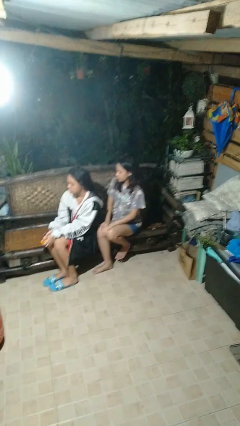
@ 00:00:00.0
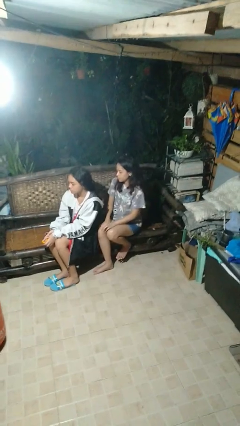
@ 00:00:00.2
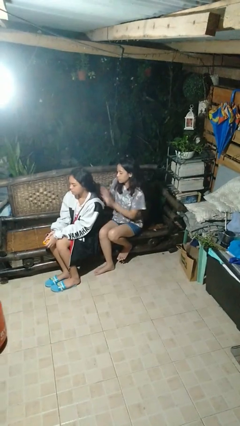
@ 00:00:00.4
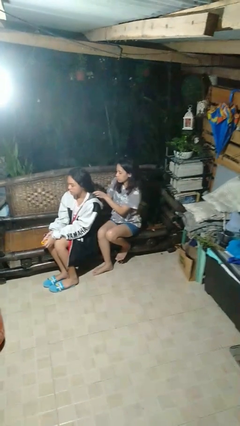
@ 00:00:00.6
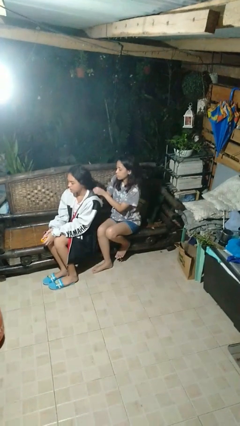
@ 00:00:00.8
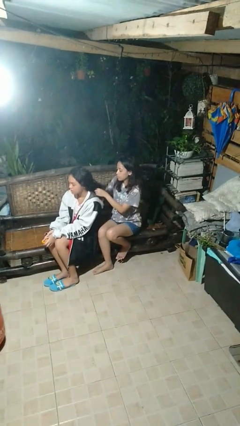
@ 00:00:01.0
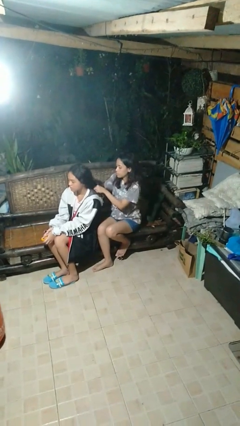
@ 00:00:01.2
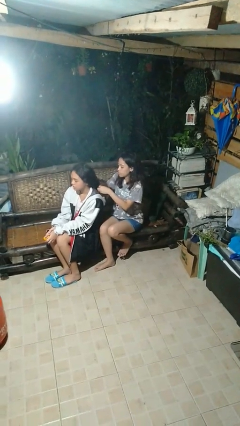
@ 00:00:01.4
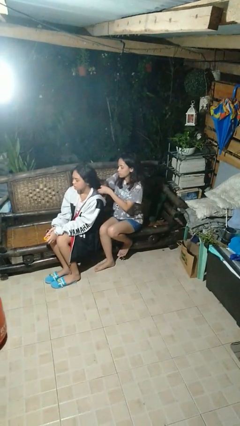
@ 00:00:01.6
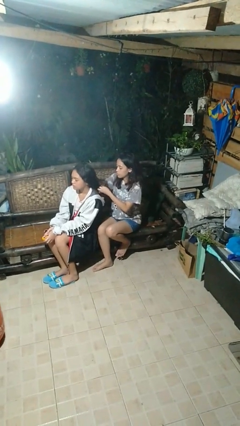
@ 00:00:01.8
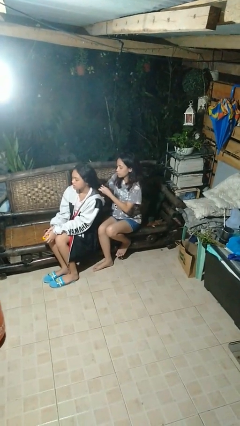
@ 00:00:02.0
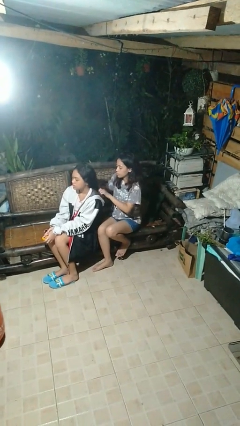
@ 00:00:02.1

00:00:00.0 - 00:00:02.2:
person braids hair of person

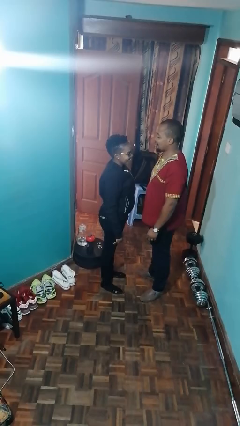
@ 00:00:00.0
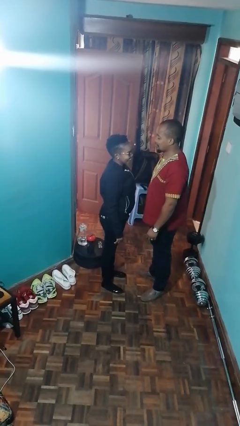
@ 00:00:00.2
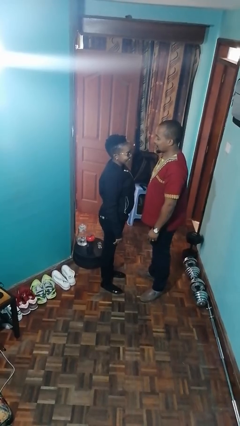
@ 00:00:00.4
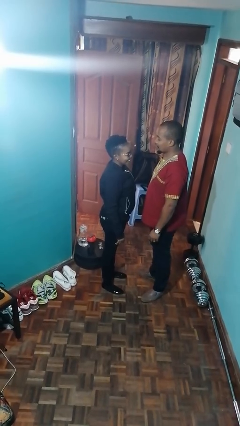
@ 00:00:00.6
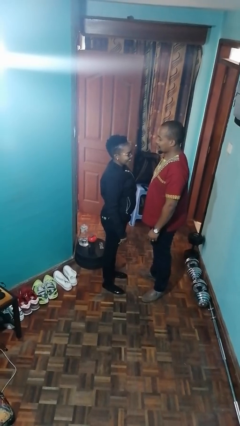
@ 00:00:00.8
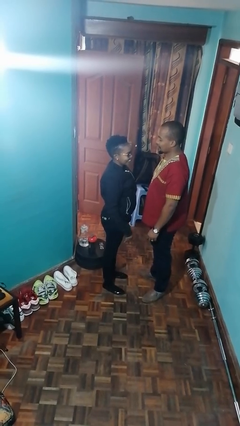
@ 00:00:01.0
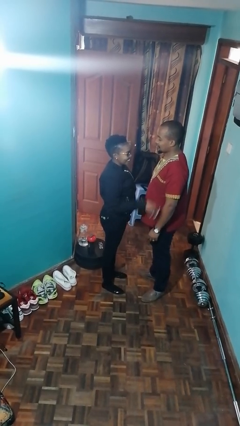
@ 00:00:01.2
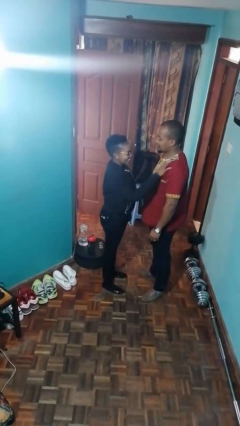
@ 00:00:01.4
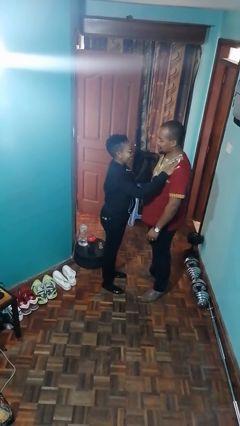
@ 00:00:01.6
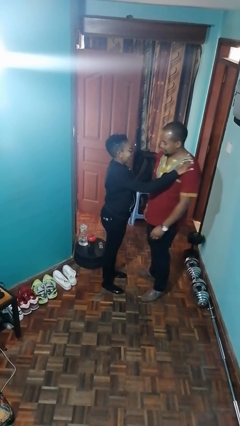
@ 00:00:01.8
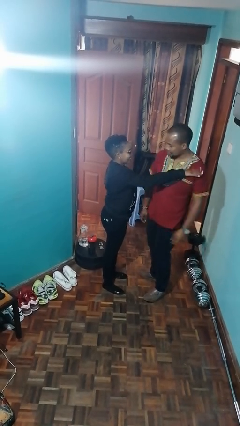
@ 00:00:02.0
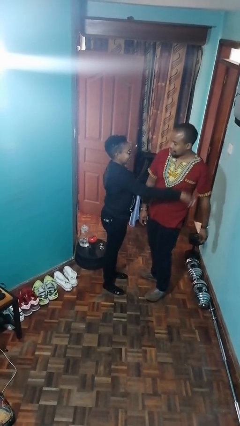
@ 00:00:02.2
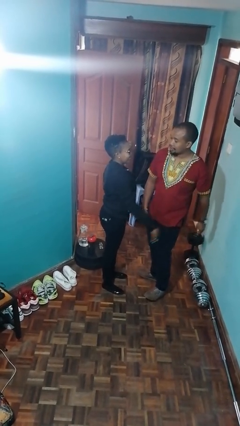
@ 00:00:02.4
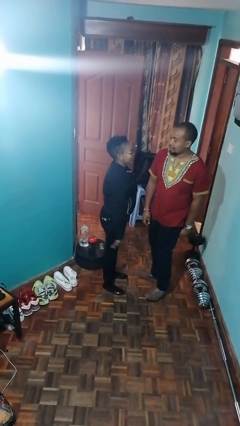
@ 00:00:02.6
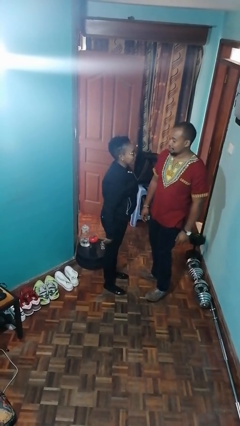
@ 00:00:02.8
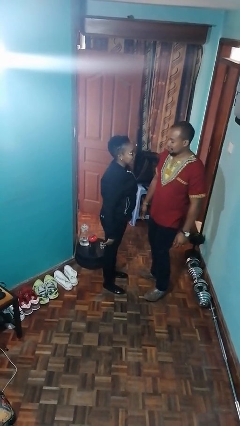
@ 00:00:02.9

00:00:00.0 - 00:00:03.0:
person shoves person

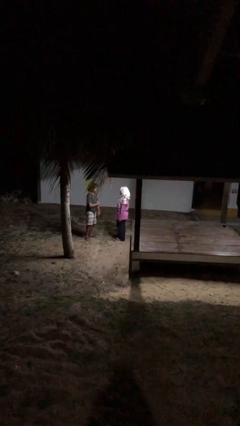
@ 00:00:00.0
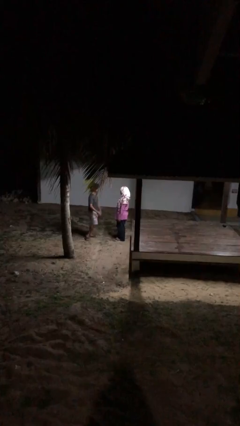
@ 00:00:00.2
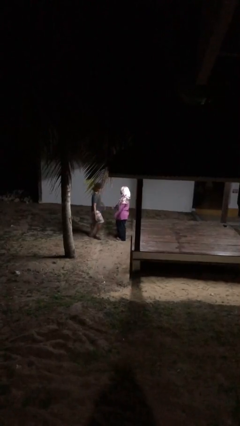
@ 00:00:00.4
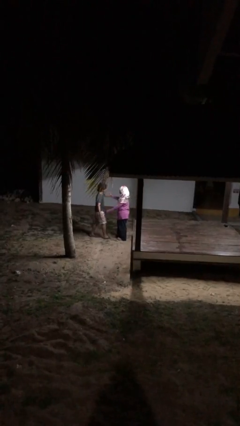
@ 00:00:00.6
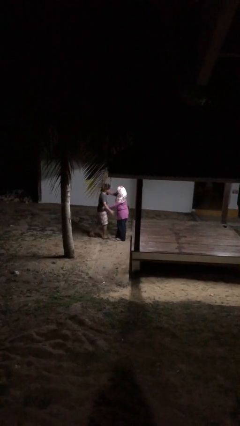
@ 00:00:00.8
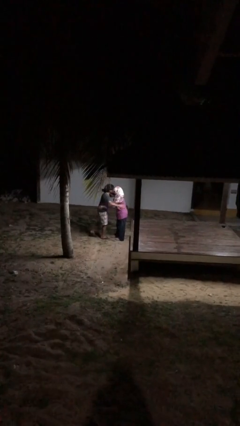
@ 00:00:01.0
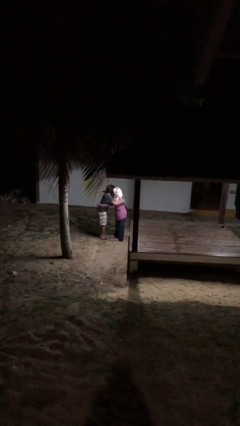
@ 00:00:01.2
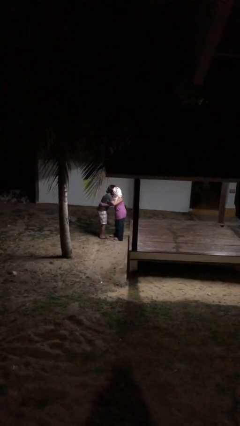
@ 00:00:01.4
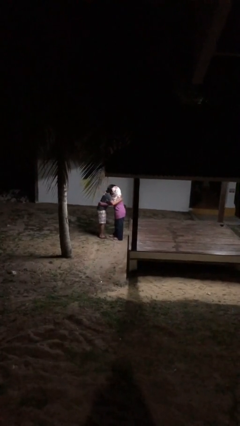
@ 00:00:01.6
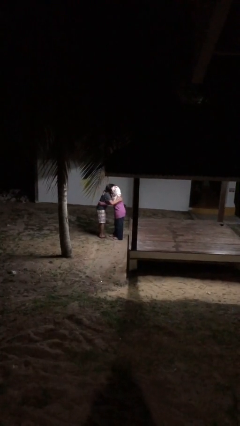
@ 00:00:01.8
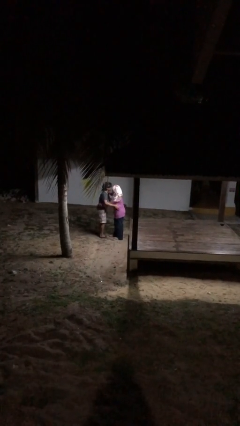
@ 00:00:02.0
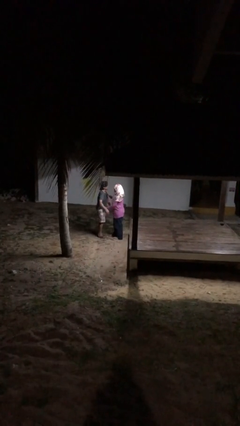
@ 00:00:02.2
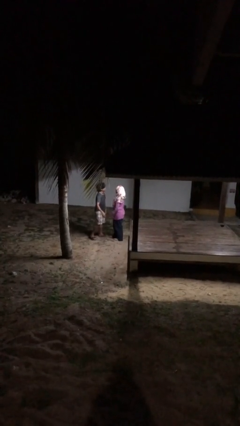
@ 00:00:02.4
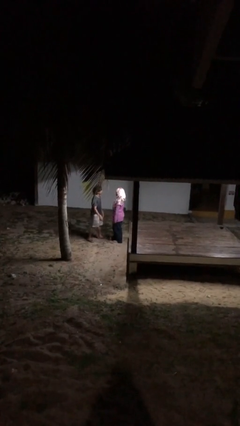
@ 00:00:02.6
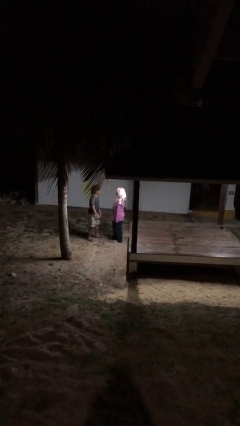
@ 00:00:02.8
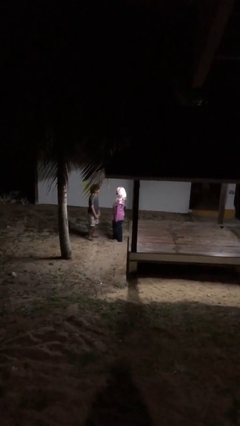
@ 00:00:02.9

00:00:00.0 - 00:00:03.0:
person embraces person

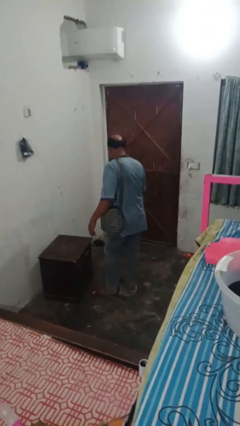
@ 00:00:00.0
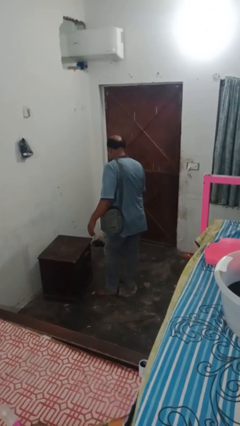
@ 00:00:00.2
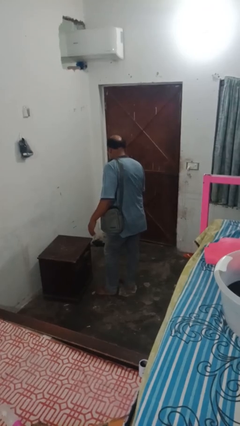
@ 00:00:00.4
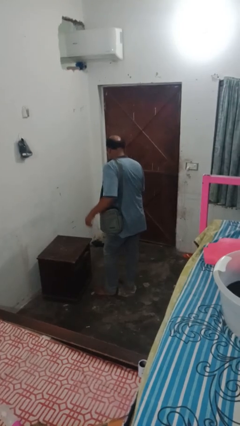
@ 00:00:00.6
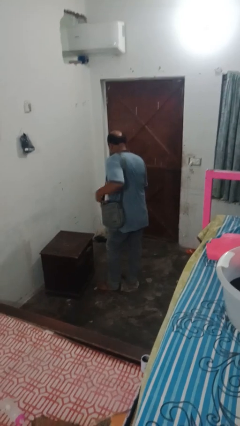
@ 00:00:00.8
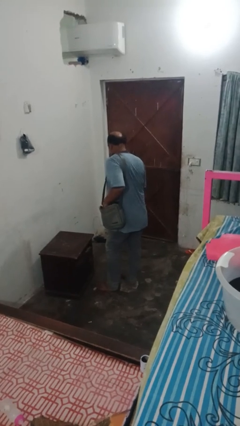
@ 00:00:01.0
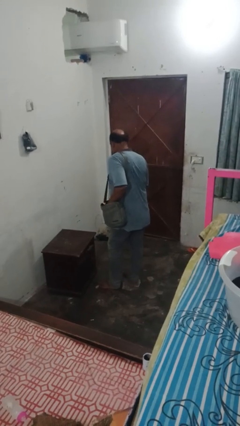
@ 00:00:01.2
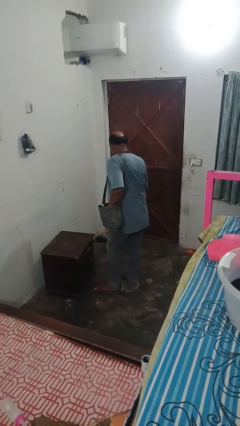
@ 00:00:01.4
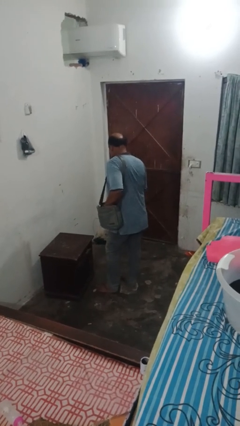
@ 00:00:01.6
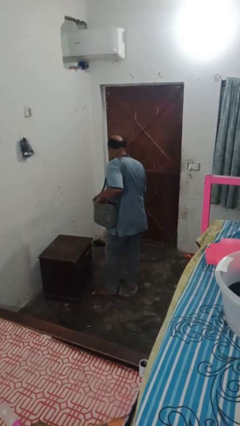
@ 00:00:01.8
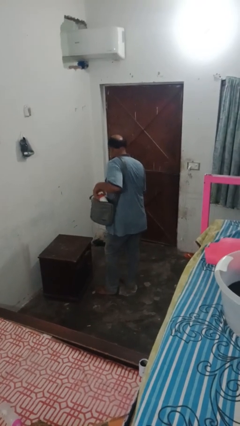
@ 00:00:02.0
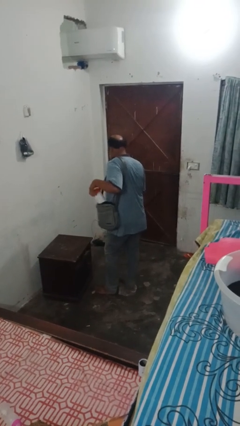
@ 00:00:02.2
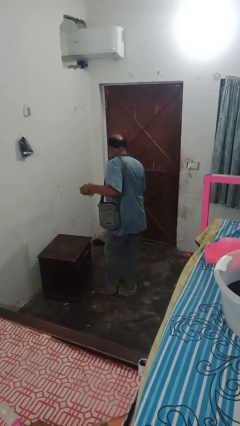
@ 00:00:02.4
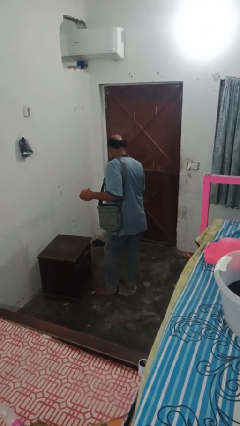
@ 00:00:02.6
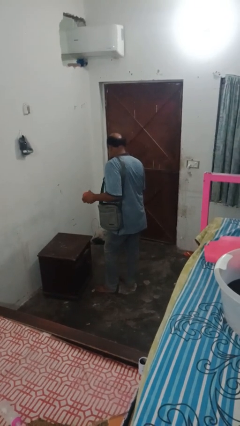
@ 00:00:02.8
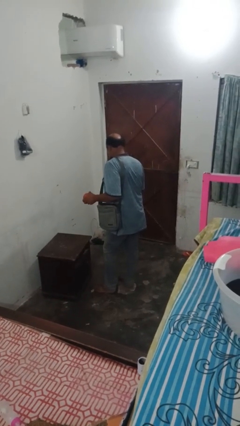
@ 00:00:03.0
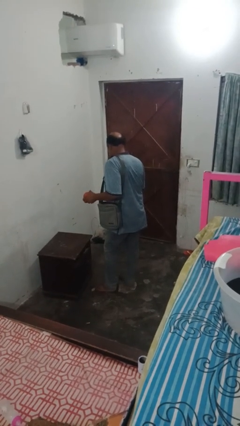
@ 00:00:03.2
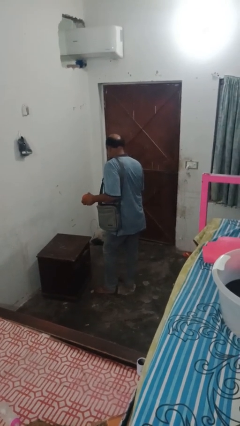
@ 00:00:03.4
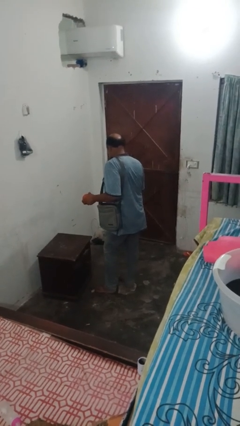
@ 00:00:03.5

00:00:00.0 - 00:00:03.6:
person takes object from bag

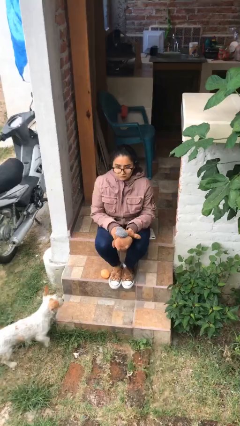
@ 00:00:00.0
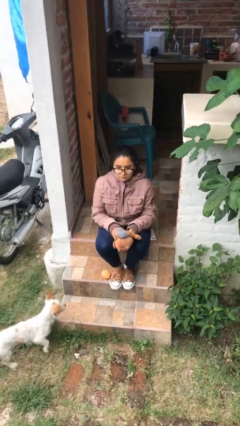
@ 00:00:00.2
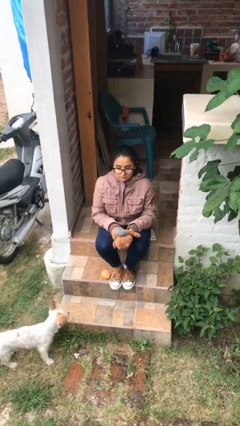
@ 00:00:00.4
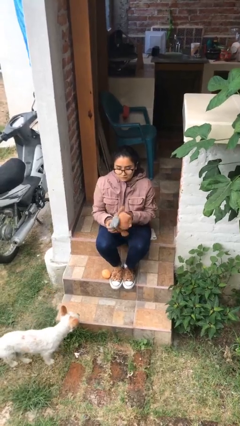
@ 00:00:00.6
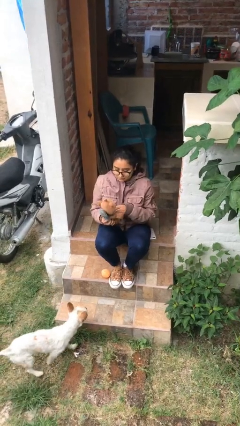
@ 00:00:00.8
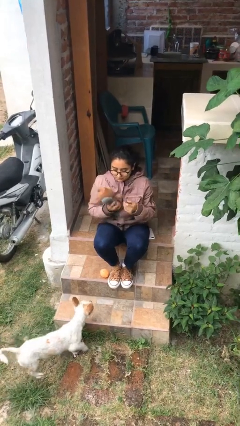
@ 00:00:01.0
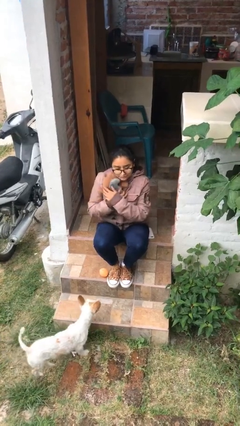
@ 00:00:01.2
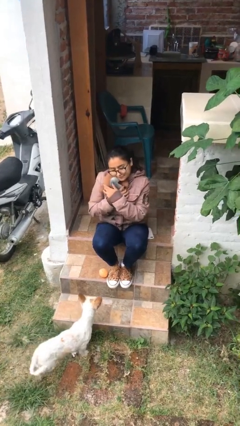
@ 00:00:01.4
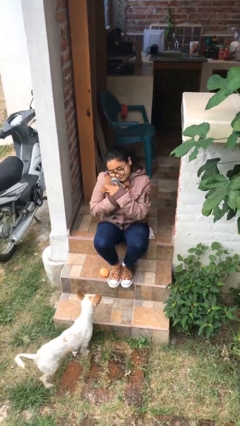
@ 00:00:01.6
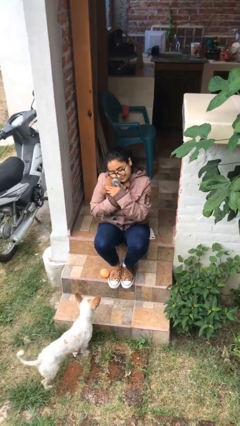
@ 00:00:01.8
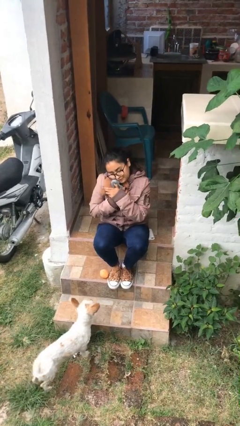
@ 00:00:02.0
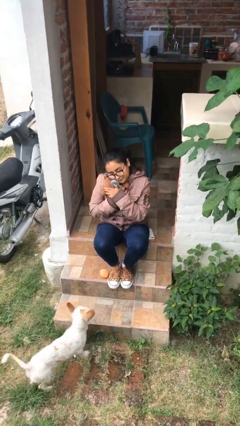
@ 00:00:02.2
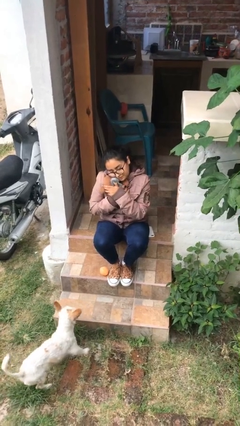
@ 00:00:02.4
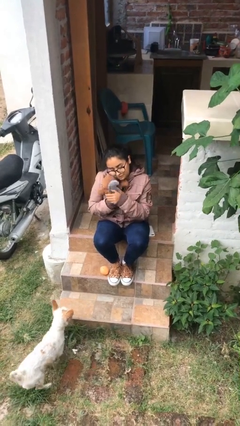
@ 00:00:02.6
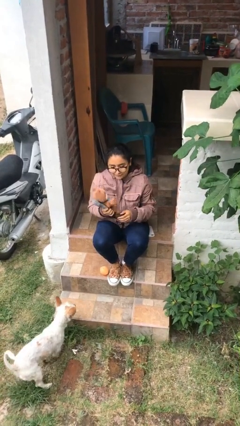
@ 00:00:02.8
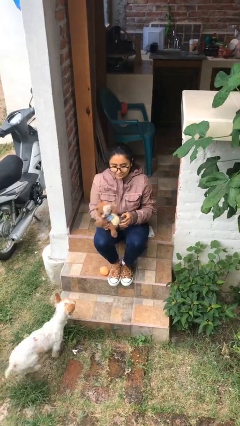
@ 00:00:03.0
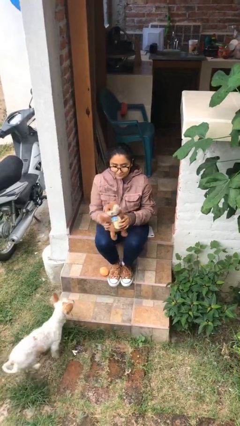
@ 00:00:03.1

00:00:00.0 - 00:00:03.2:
person hugs stuffed animal

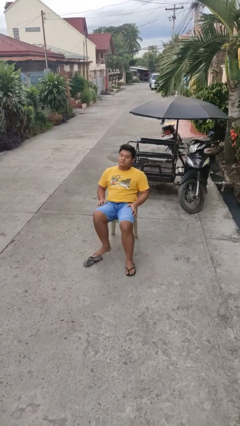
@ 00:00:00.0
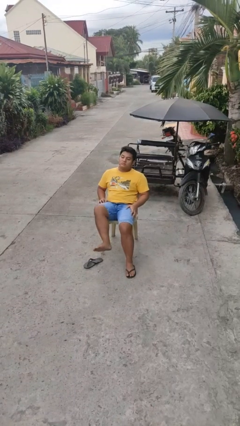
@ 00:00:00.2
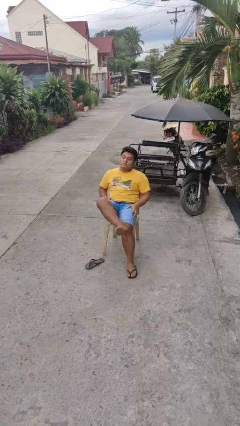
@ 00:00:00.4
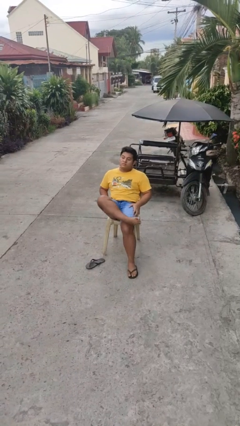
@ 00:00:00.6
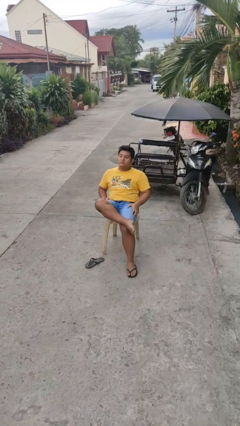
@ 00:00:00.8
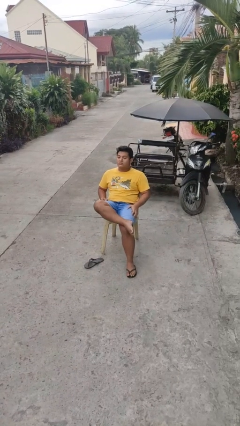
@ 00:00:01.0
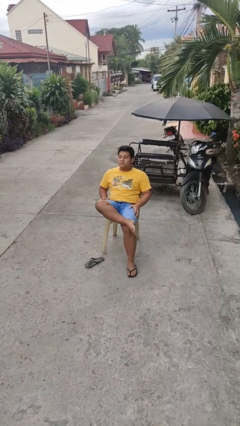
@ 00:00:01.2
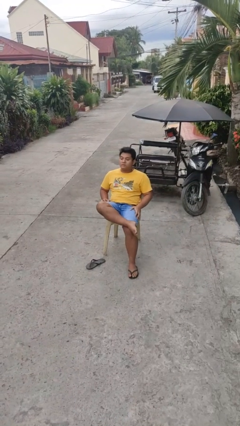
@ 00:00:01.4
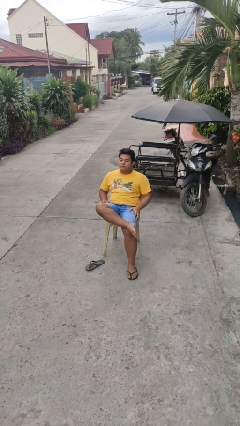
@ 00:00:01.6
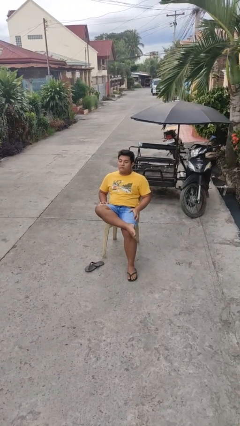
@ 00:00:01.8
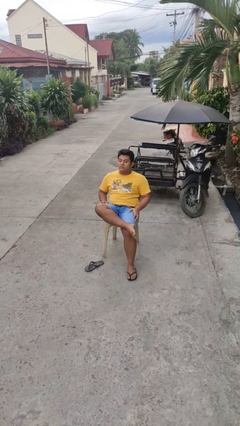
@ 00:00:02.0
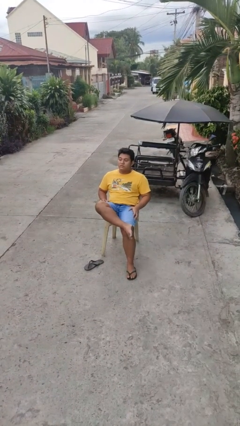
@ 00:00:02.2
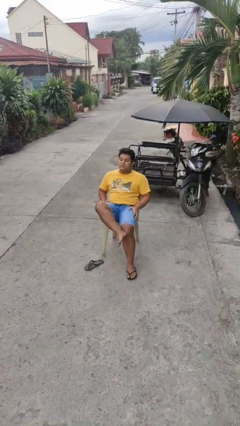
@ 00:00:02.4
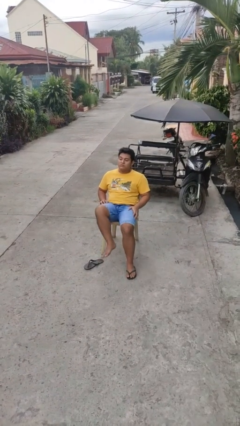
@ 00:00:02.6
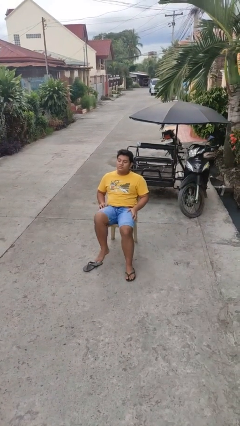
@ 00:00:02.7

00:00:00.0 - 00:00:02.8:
person crosses legs
